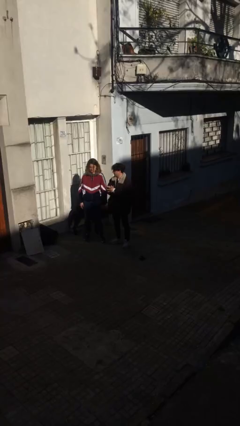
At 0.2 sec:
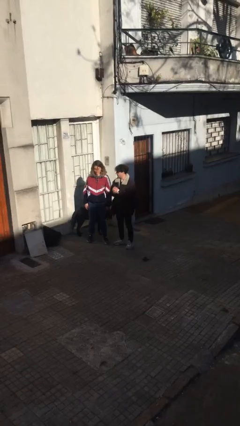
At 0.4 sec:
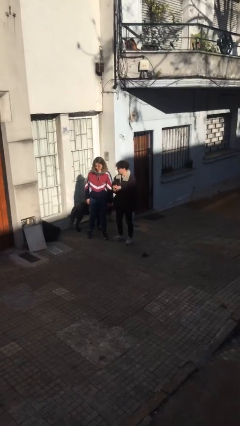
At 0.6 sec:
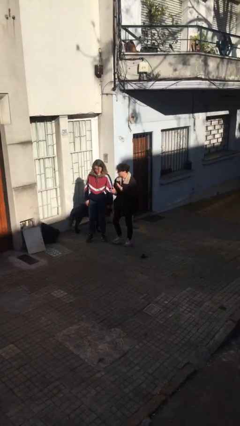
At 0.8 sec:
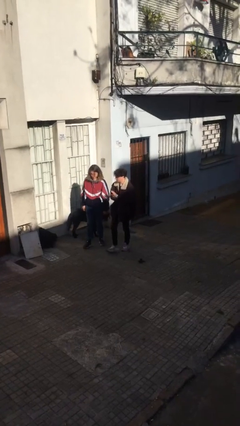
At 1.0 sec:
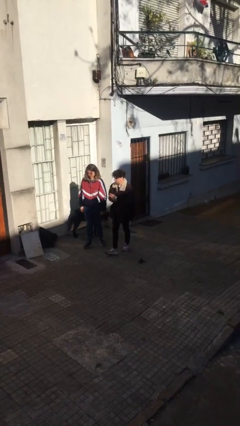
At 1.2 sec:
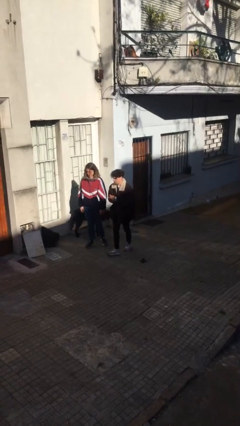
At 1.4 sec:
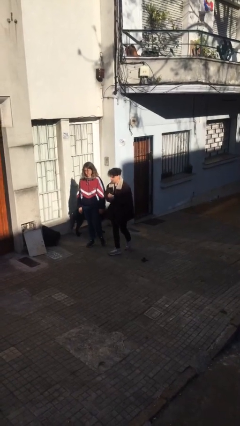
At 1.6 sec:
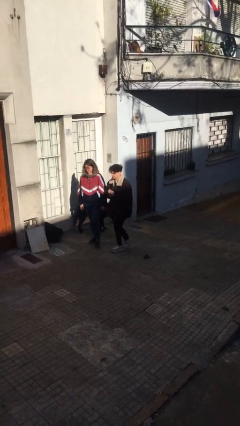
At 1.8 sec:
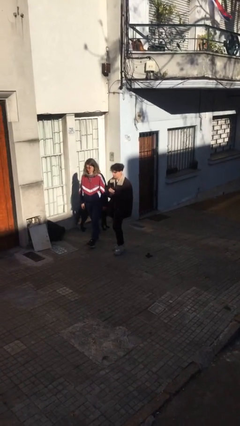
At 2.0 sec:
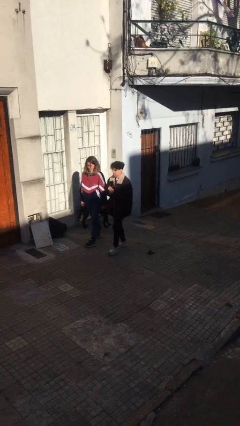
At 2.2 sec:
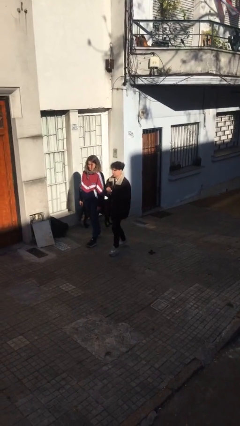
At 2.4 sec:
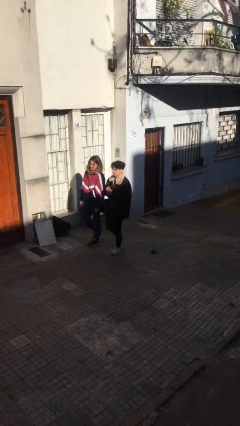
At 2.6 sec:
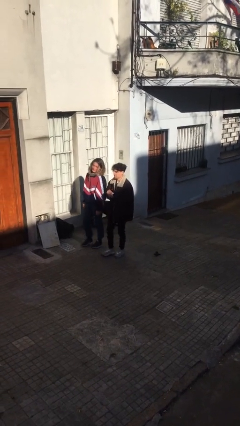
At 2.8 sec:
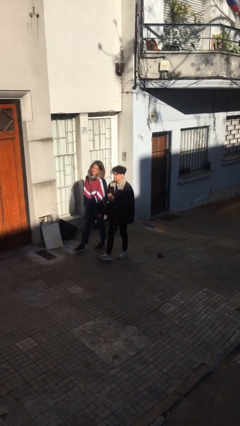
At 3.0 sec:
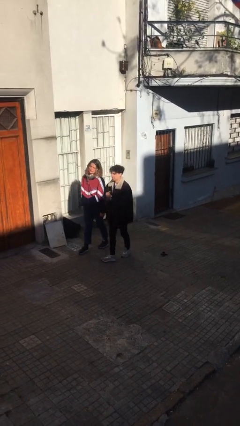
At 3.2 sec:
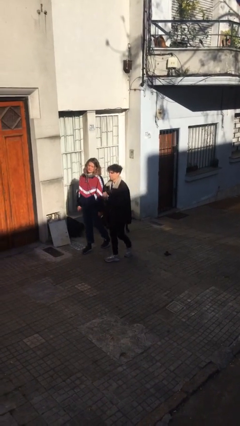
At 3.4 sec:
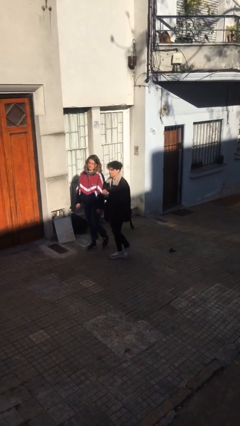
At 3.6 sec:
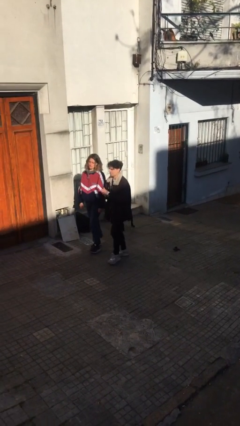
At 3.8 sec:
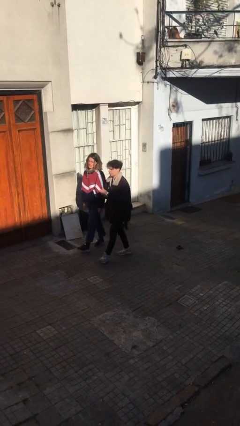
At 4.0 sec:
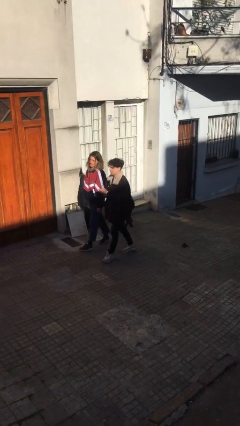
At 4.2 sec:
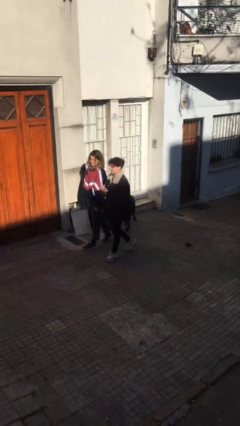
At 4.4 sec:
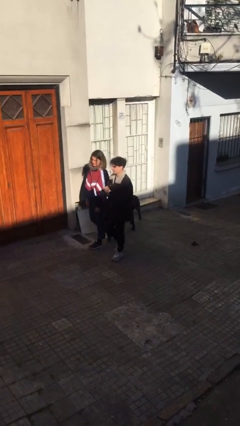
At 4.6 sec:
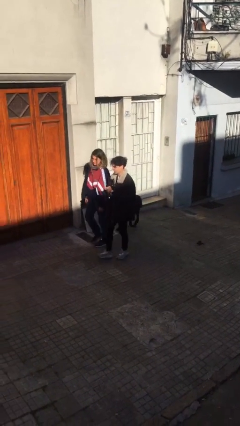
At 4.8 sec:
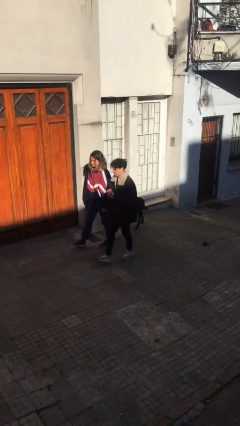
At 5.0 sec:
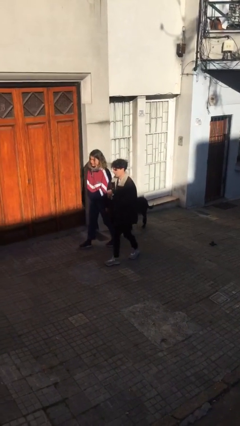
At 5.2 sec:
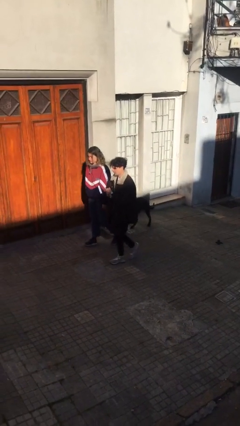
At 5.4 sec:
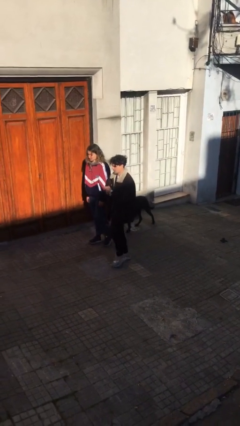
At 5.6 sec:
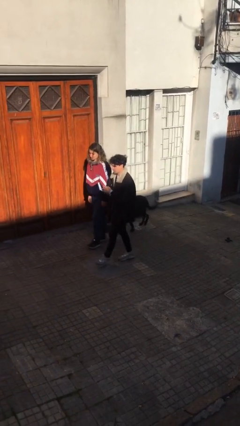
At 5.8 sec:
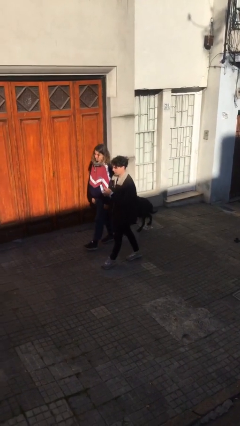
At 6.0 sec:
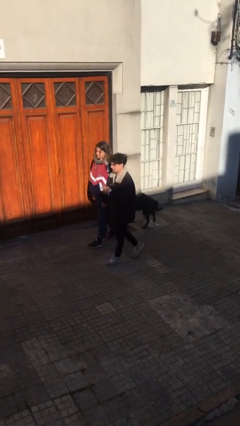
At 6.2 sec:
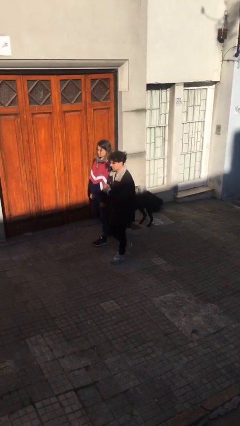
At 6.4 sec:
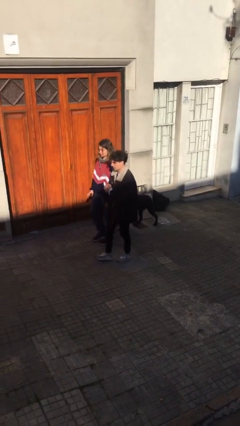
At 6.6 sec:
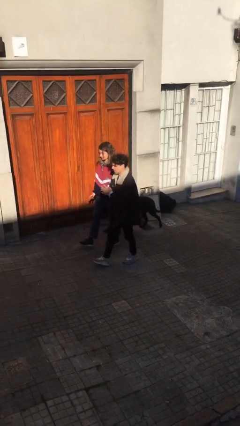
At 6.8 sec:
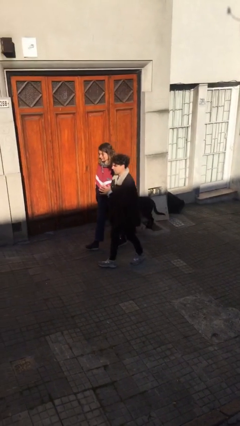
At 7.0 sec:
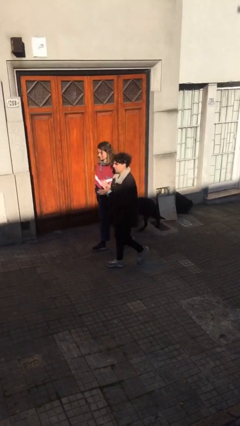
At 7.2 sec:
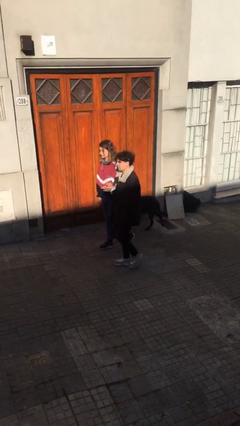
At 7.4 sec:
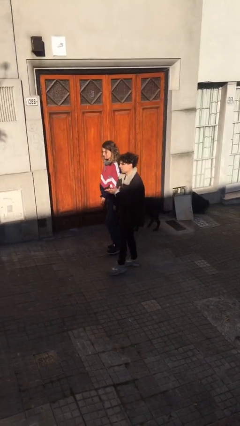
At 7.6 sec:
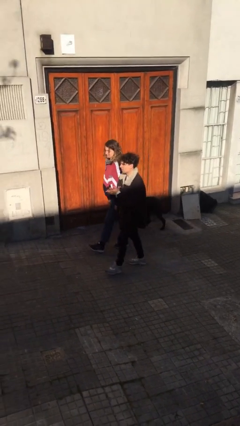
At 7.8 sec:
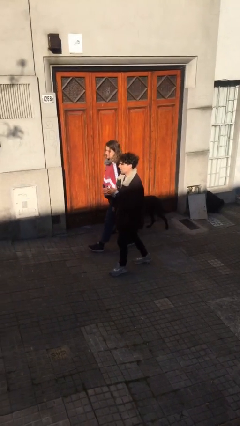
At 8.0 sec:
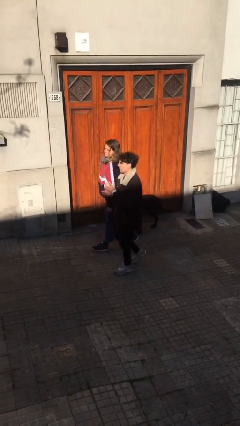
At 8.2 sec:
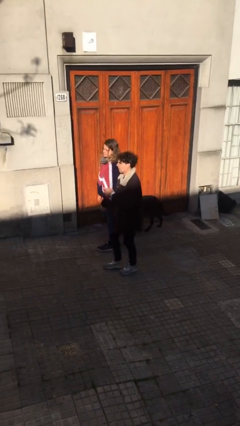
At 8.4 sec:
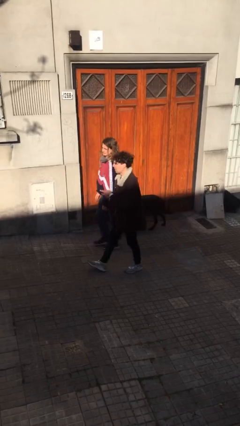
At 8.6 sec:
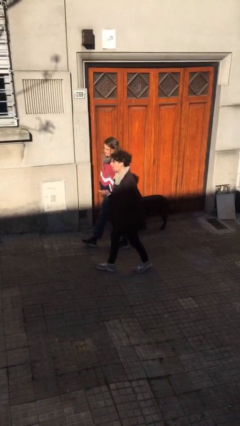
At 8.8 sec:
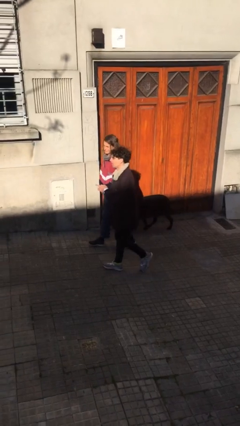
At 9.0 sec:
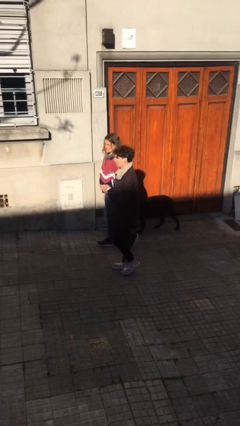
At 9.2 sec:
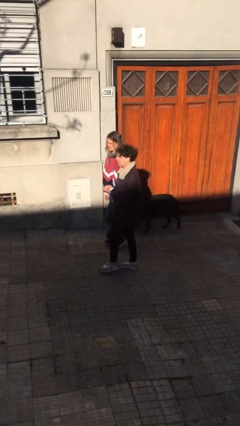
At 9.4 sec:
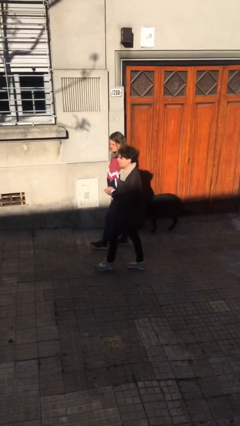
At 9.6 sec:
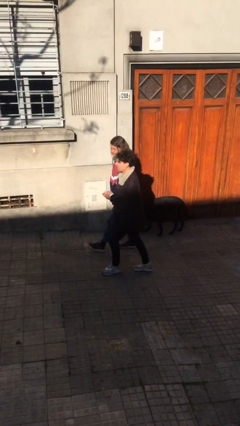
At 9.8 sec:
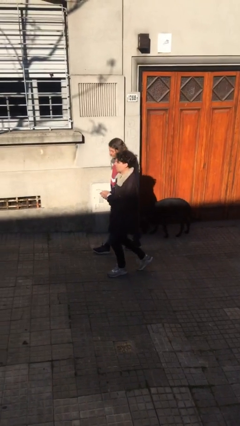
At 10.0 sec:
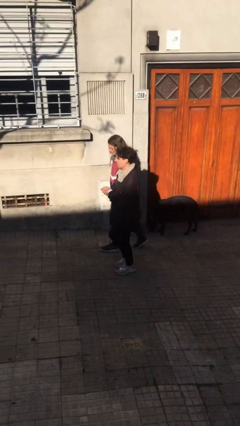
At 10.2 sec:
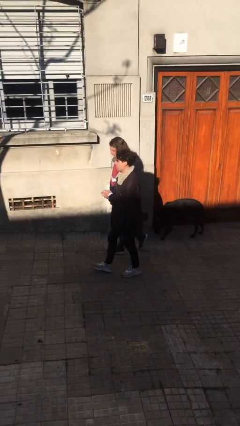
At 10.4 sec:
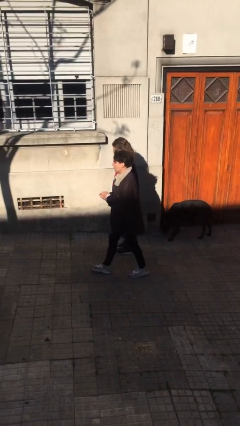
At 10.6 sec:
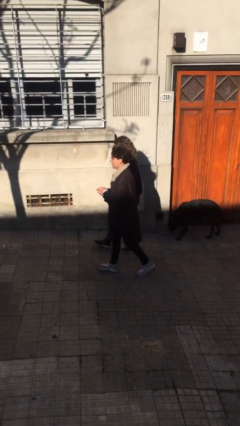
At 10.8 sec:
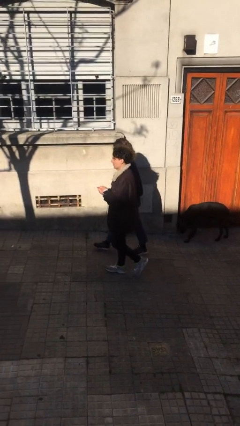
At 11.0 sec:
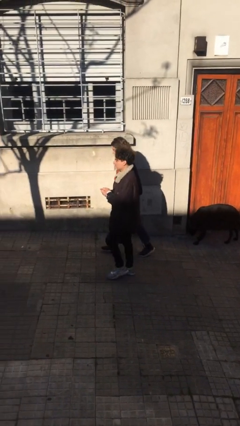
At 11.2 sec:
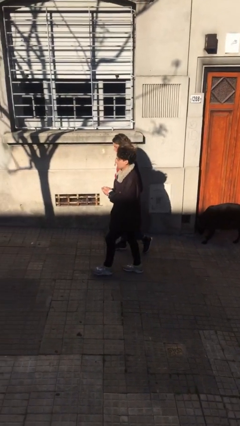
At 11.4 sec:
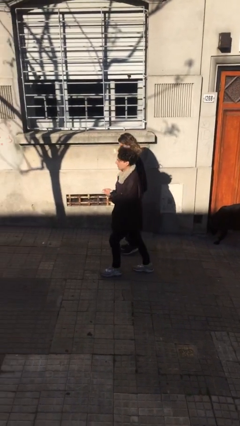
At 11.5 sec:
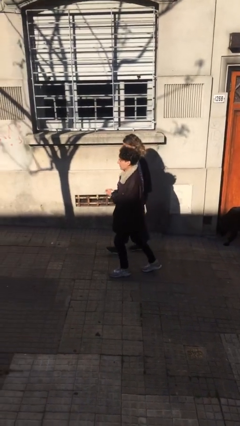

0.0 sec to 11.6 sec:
person talks to person

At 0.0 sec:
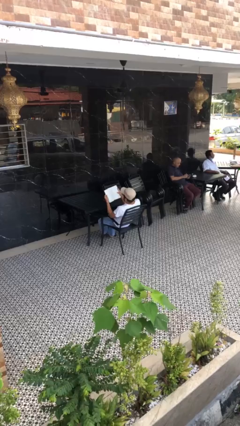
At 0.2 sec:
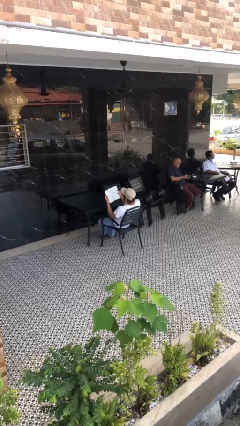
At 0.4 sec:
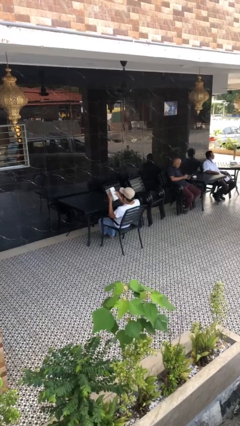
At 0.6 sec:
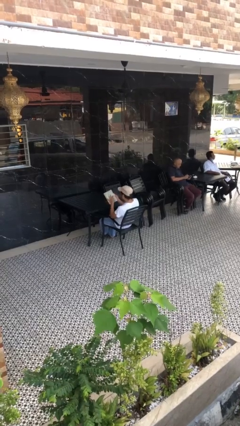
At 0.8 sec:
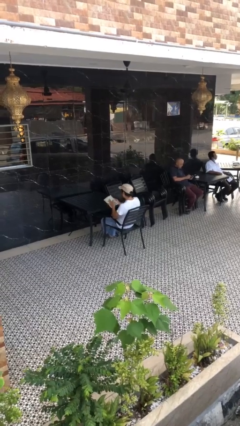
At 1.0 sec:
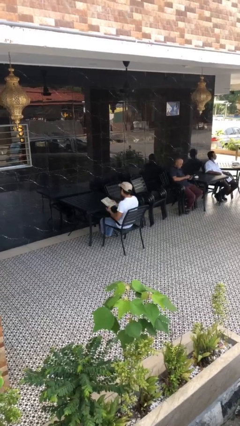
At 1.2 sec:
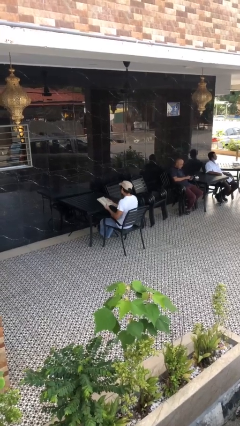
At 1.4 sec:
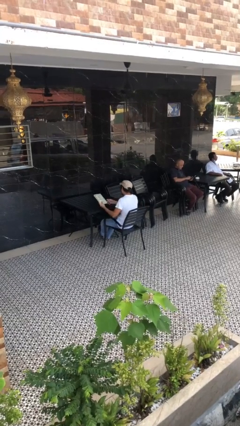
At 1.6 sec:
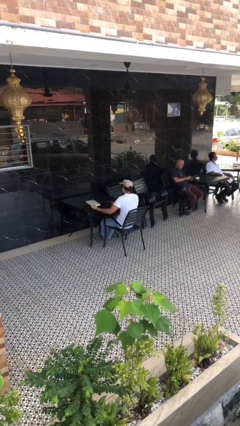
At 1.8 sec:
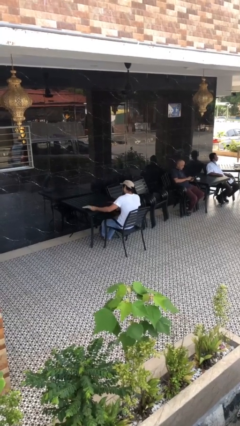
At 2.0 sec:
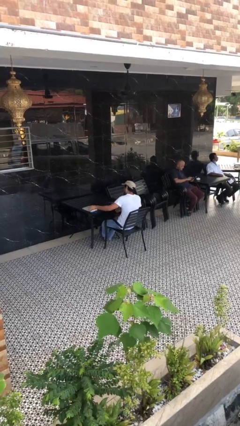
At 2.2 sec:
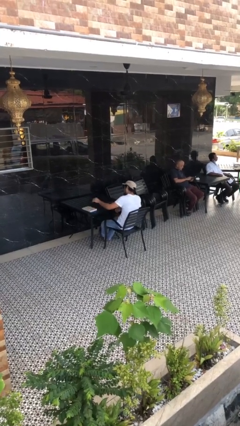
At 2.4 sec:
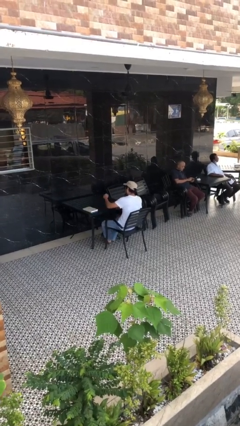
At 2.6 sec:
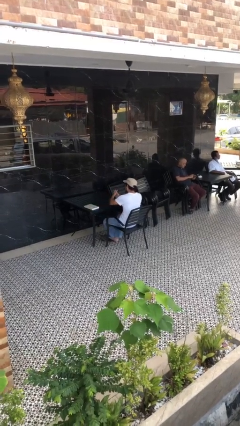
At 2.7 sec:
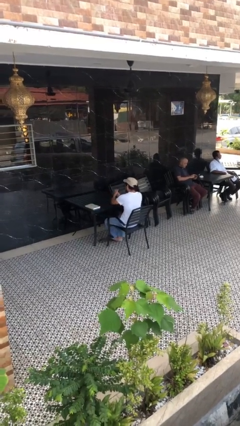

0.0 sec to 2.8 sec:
person puts down object on table

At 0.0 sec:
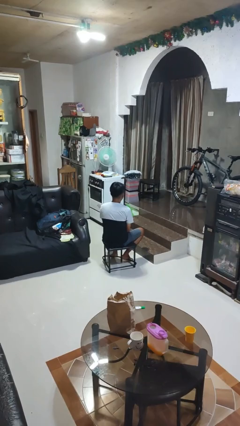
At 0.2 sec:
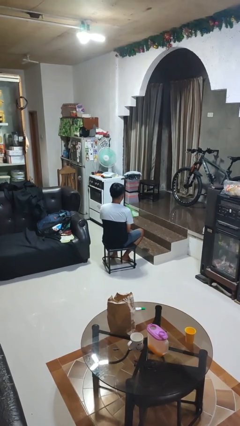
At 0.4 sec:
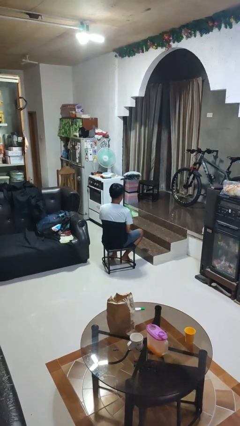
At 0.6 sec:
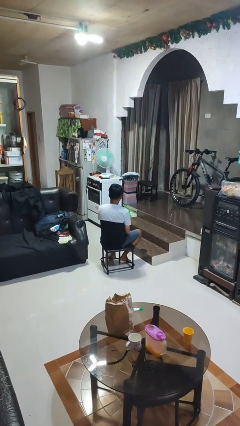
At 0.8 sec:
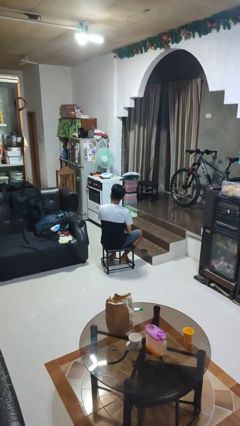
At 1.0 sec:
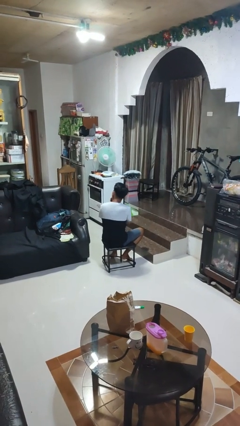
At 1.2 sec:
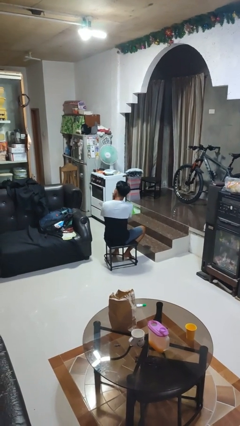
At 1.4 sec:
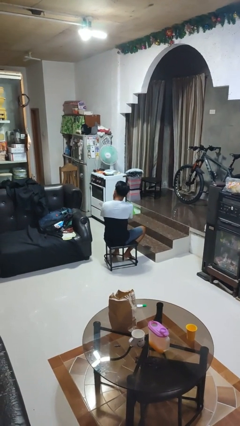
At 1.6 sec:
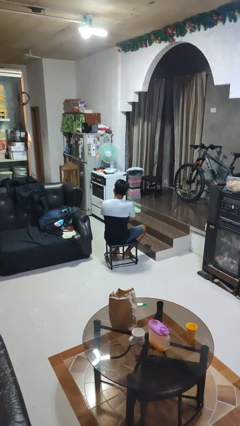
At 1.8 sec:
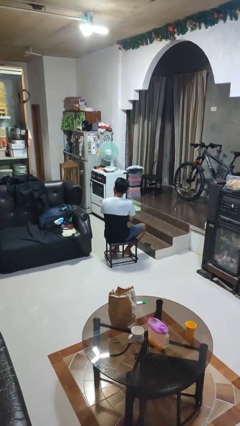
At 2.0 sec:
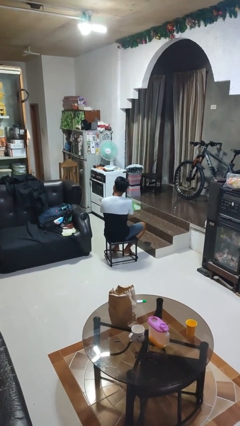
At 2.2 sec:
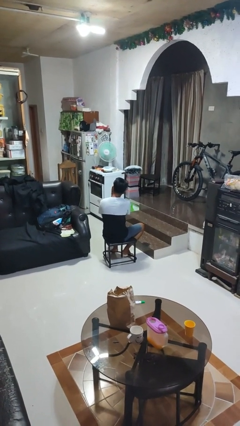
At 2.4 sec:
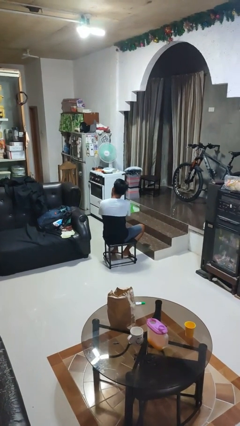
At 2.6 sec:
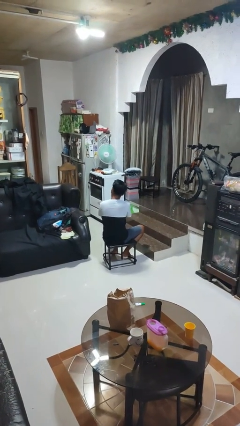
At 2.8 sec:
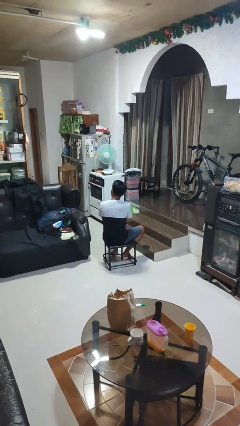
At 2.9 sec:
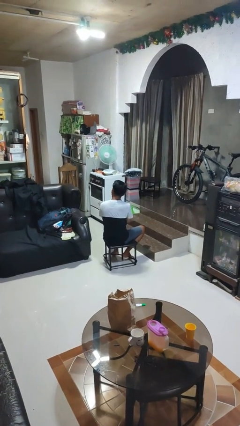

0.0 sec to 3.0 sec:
person strokes chin

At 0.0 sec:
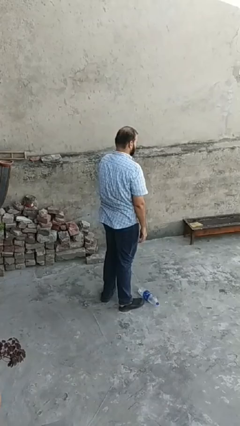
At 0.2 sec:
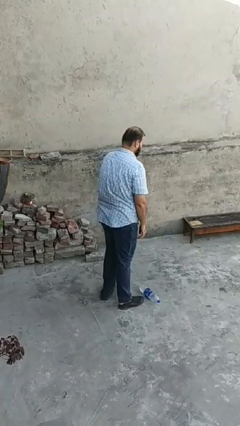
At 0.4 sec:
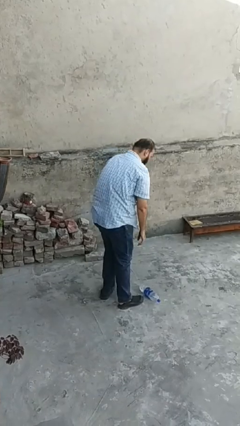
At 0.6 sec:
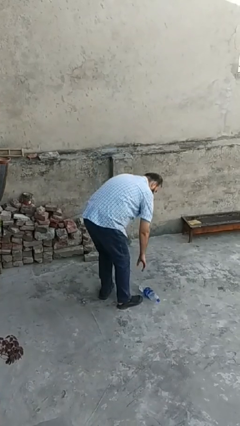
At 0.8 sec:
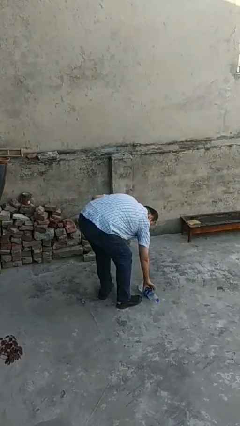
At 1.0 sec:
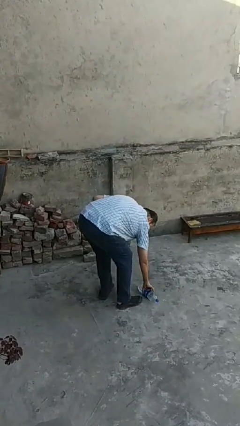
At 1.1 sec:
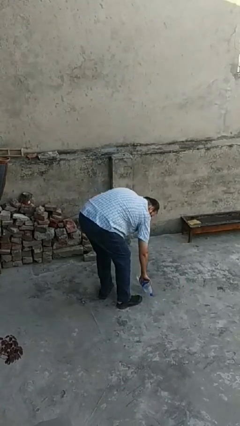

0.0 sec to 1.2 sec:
person picks up object from floor
